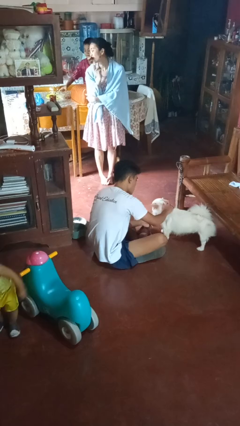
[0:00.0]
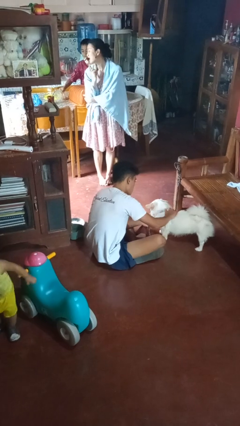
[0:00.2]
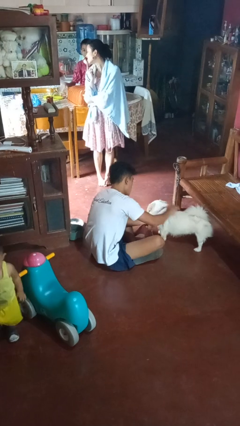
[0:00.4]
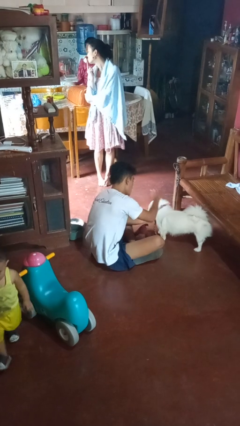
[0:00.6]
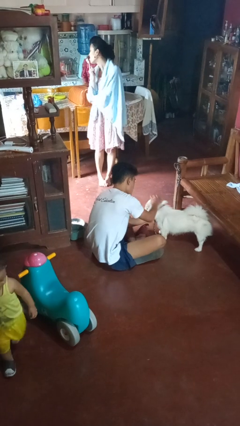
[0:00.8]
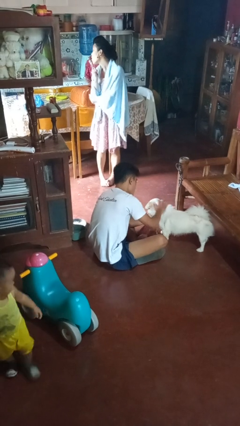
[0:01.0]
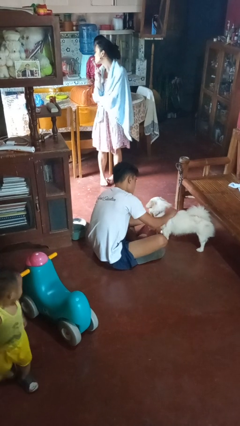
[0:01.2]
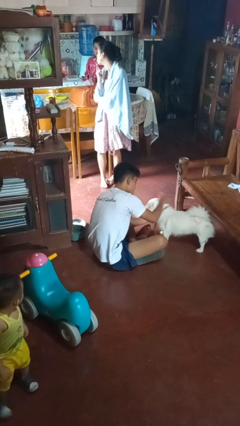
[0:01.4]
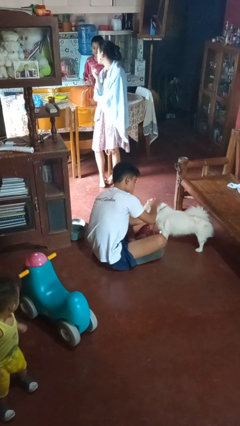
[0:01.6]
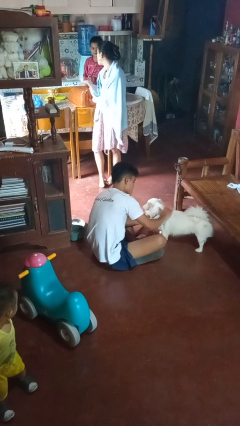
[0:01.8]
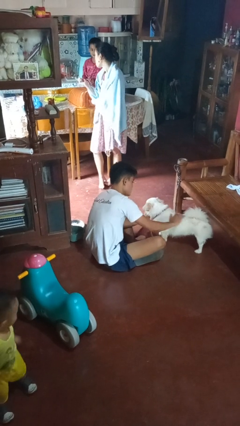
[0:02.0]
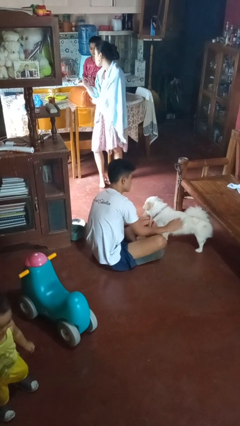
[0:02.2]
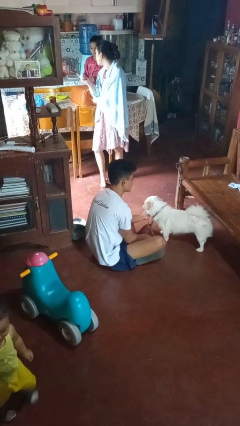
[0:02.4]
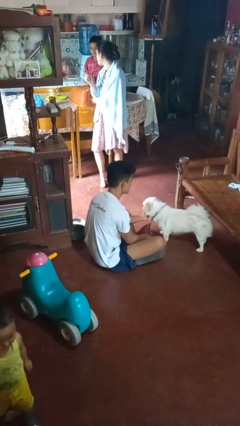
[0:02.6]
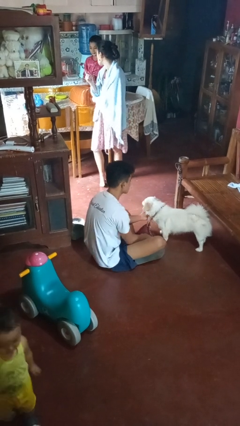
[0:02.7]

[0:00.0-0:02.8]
person pets dog

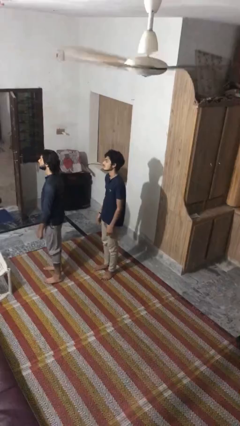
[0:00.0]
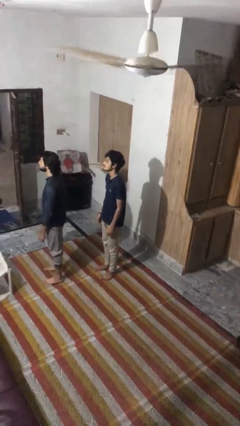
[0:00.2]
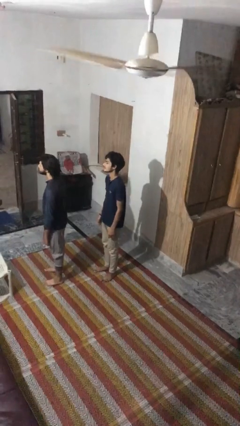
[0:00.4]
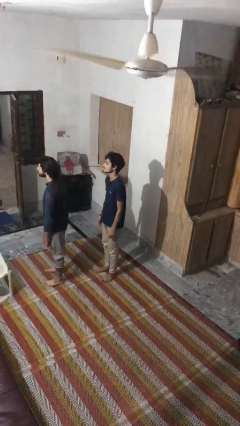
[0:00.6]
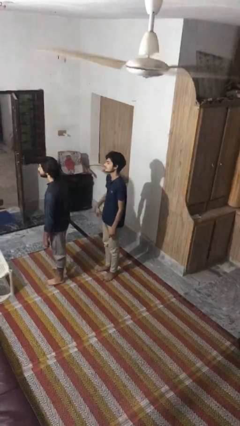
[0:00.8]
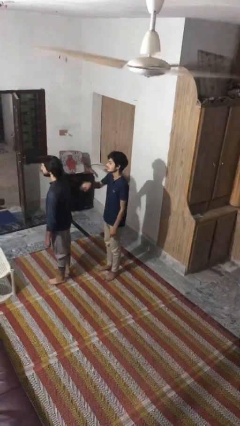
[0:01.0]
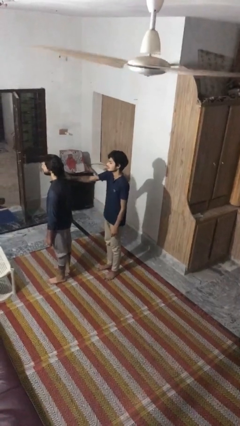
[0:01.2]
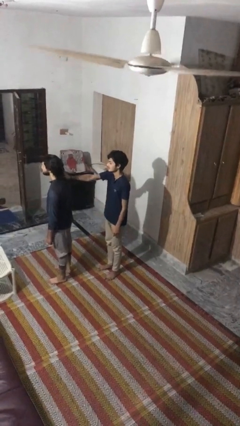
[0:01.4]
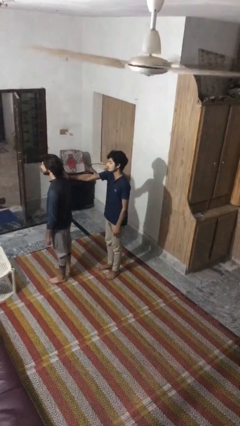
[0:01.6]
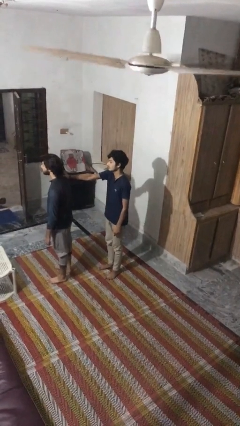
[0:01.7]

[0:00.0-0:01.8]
person grabs person by shoulder

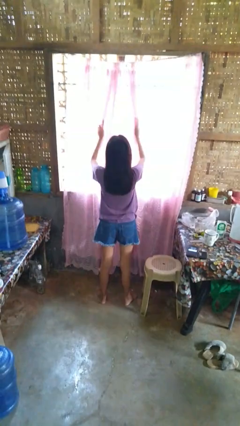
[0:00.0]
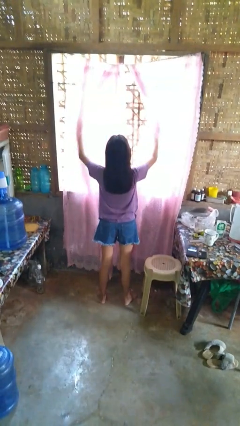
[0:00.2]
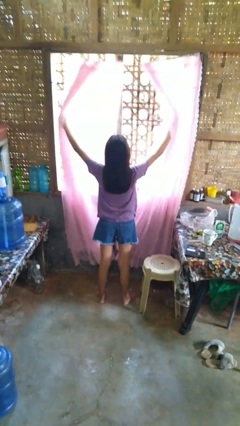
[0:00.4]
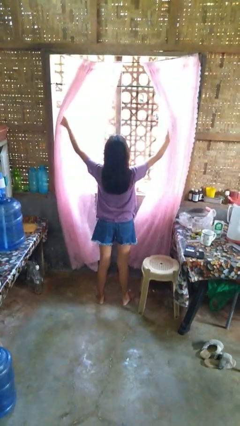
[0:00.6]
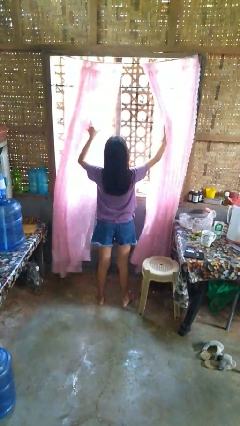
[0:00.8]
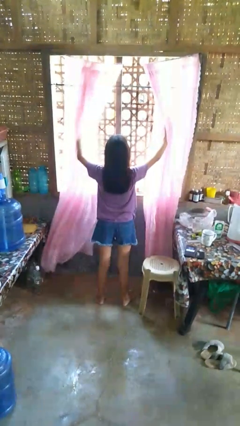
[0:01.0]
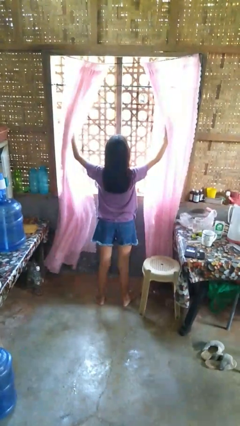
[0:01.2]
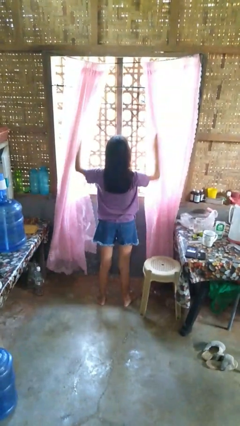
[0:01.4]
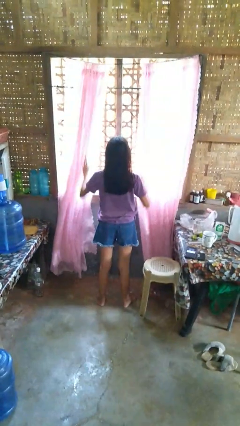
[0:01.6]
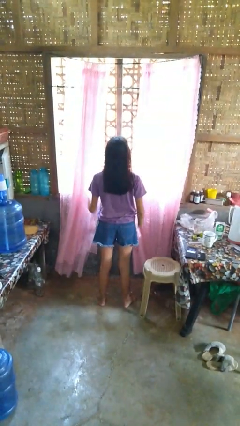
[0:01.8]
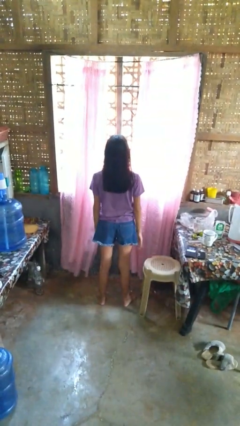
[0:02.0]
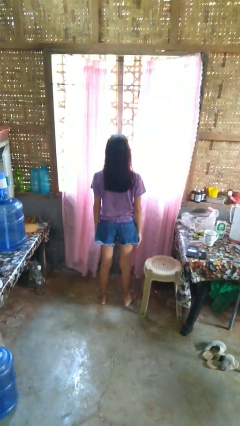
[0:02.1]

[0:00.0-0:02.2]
person opens curtains

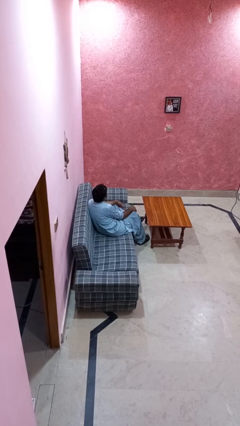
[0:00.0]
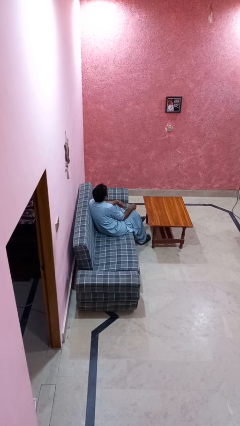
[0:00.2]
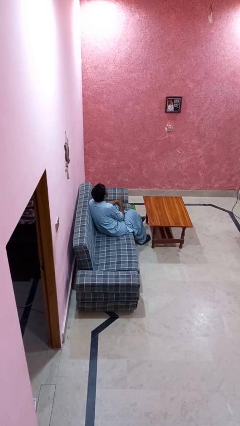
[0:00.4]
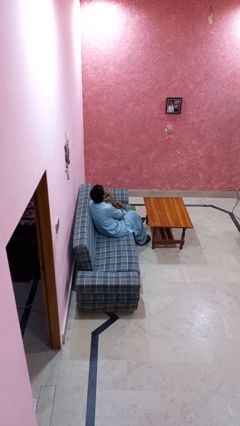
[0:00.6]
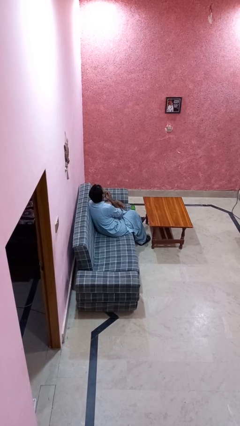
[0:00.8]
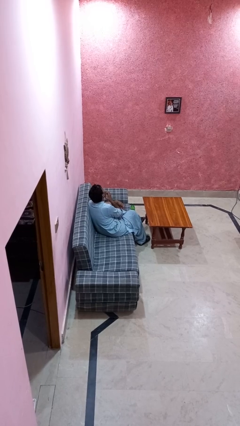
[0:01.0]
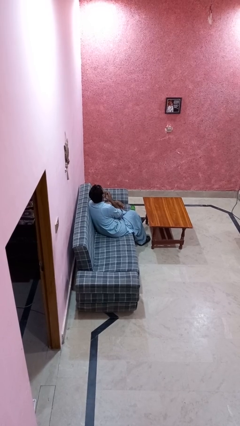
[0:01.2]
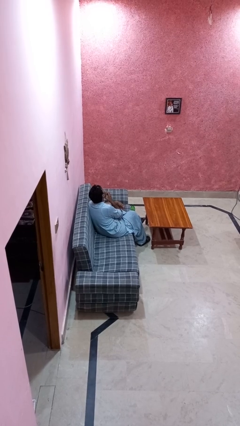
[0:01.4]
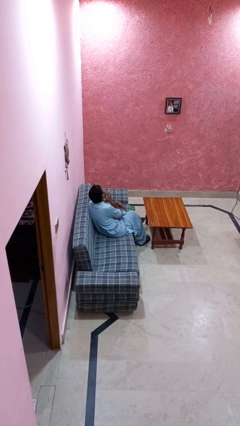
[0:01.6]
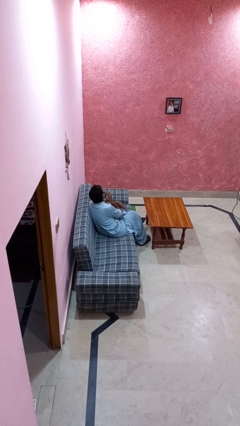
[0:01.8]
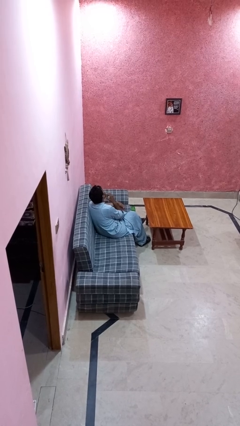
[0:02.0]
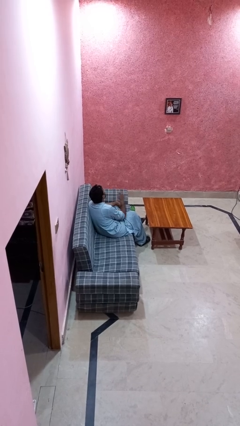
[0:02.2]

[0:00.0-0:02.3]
person strokes chin

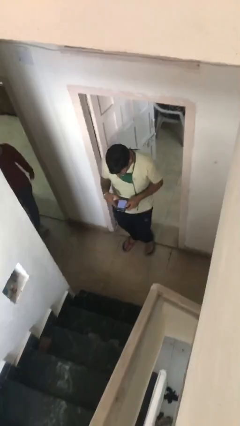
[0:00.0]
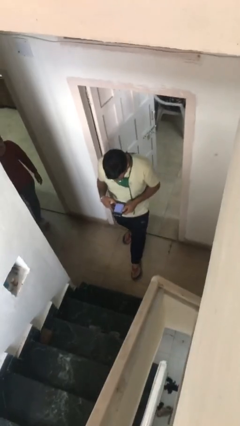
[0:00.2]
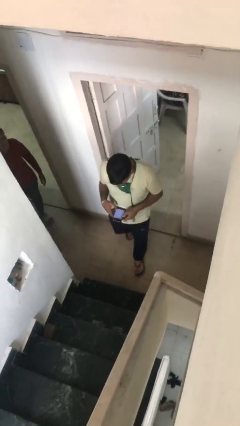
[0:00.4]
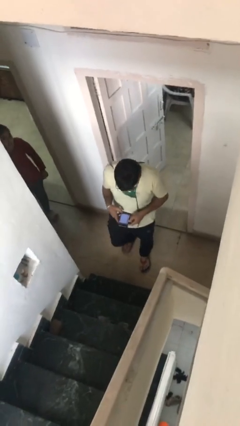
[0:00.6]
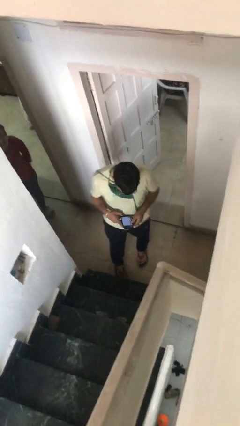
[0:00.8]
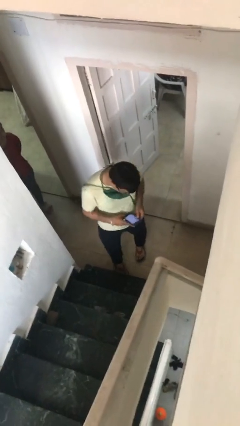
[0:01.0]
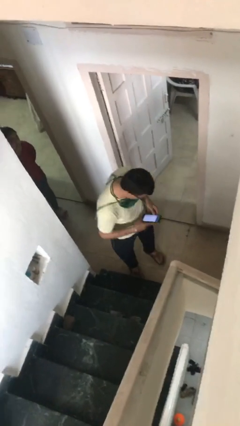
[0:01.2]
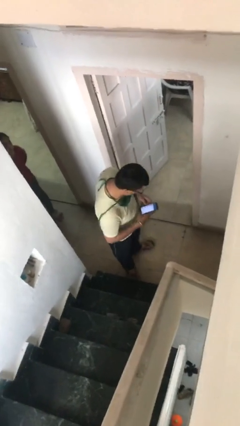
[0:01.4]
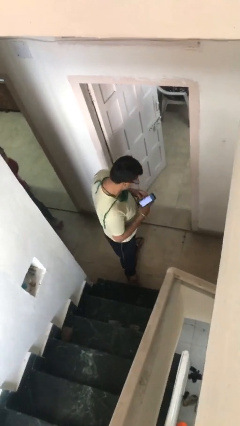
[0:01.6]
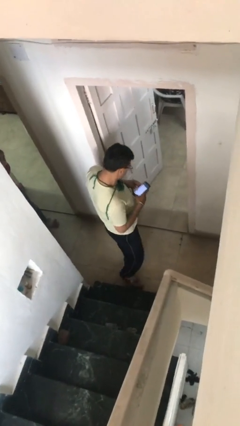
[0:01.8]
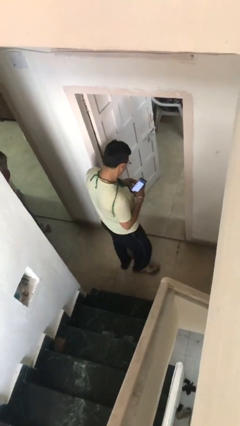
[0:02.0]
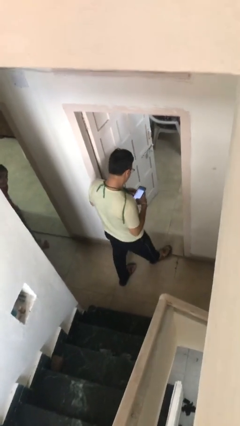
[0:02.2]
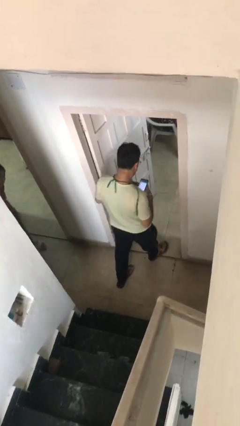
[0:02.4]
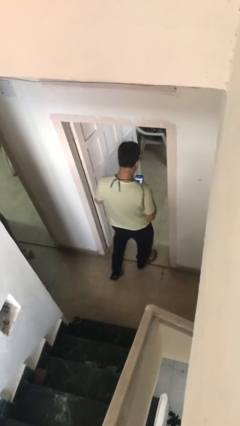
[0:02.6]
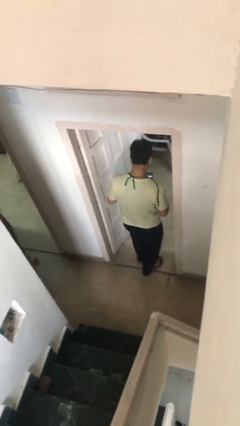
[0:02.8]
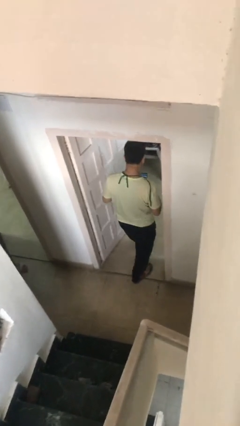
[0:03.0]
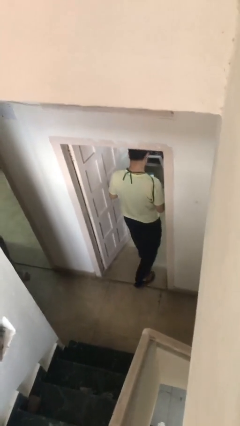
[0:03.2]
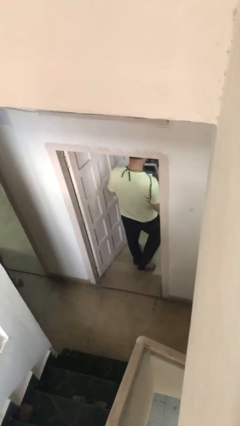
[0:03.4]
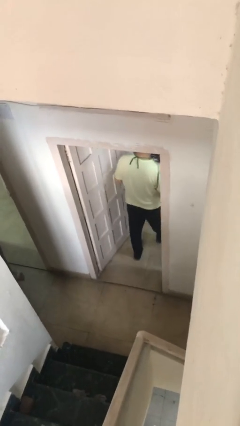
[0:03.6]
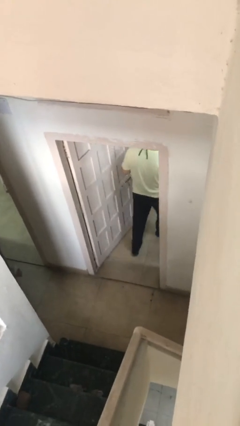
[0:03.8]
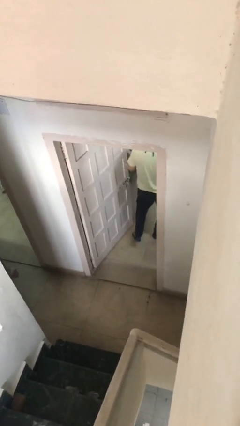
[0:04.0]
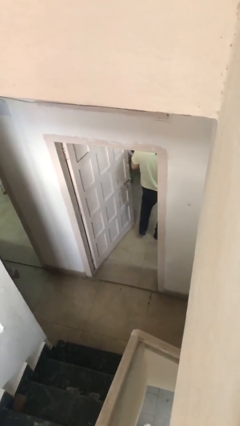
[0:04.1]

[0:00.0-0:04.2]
person exits scene through structure

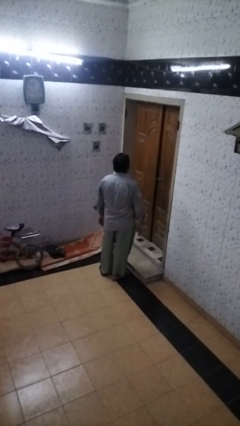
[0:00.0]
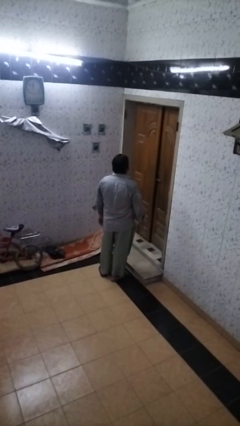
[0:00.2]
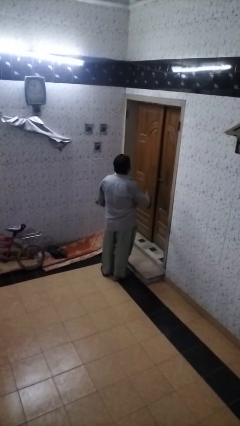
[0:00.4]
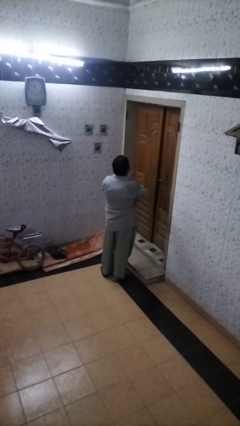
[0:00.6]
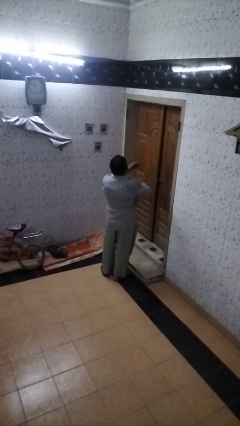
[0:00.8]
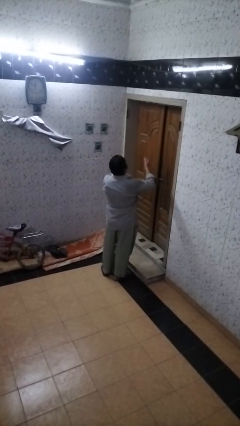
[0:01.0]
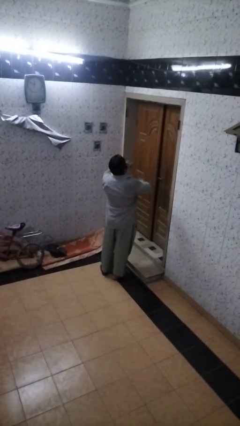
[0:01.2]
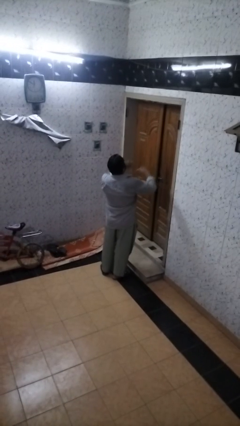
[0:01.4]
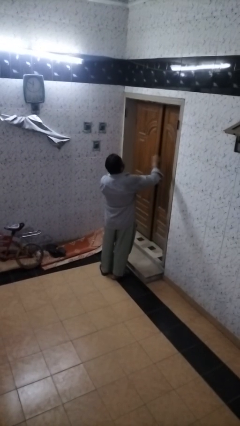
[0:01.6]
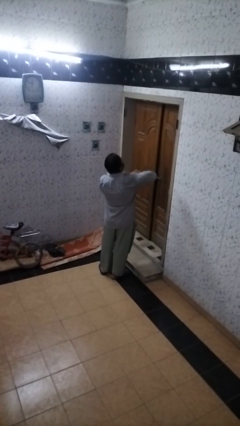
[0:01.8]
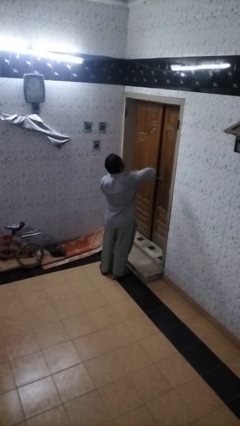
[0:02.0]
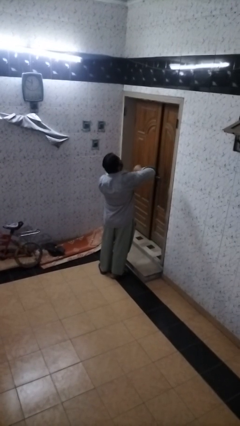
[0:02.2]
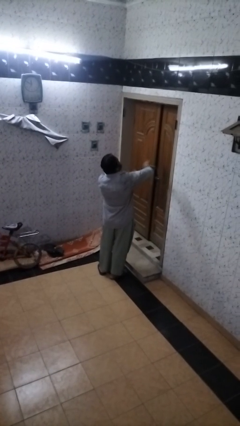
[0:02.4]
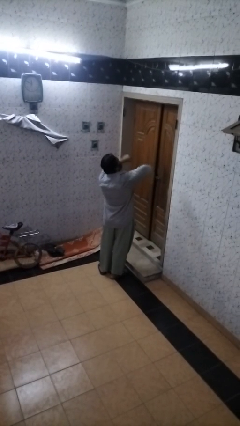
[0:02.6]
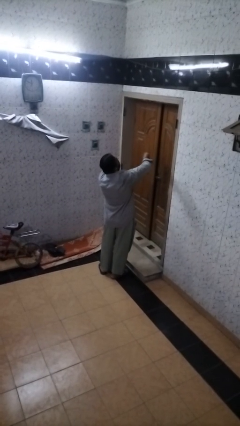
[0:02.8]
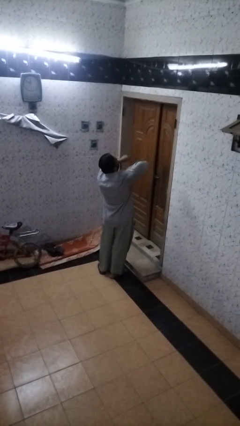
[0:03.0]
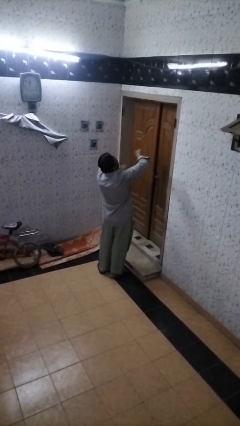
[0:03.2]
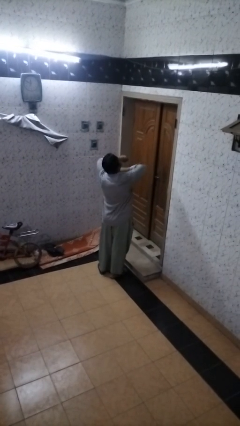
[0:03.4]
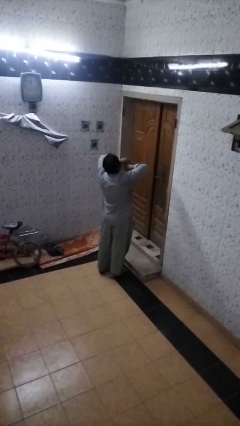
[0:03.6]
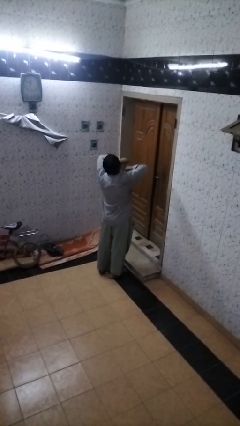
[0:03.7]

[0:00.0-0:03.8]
person drums on chest

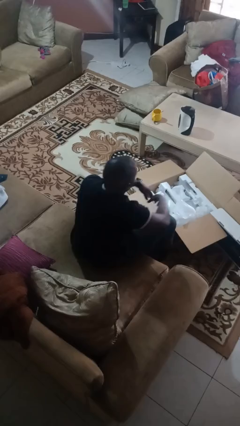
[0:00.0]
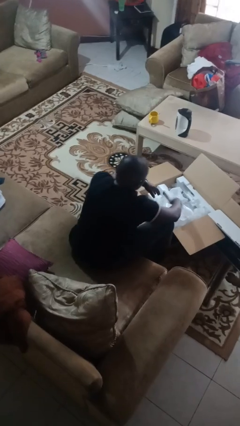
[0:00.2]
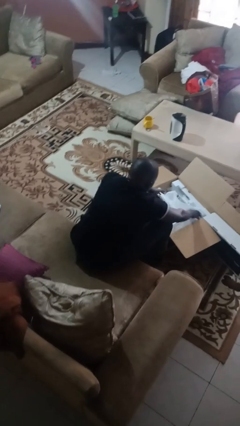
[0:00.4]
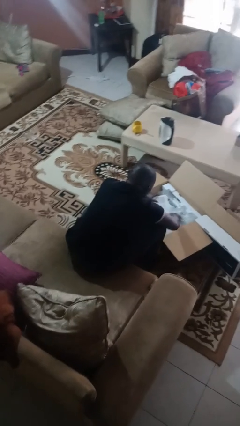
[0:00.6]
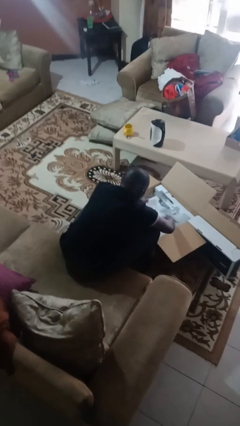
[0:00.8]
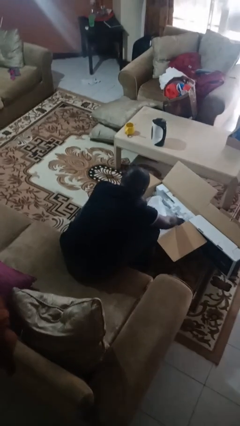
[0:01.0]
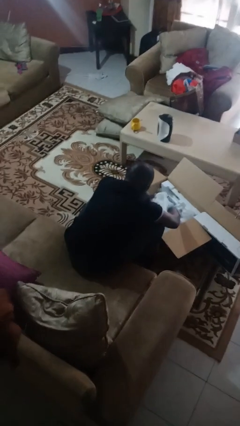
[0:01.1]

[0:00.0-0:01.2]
person searches in box
